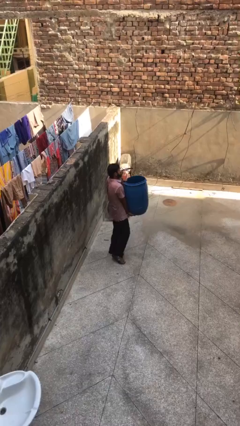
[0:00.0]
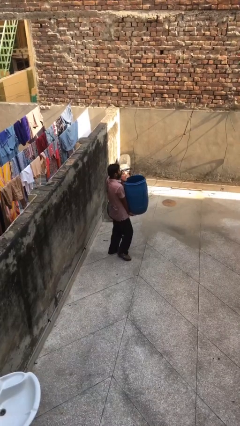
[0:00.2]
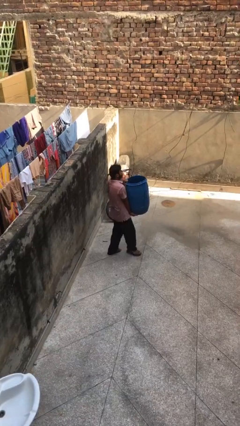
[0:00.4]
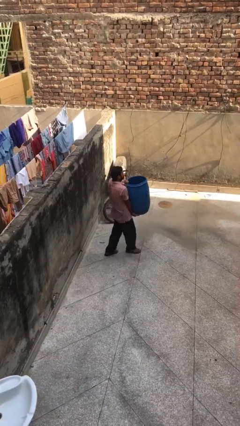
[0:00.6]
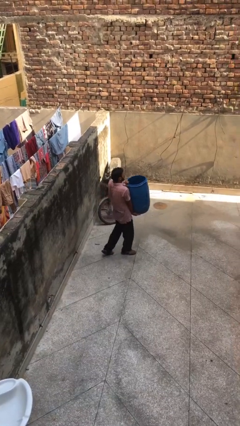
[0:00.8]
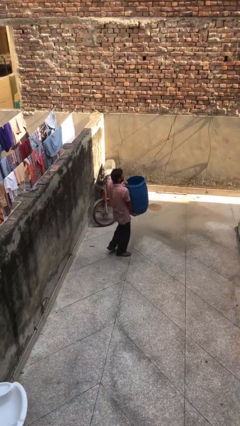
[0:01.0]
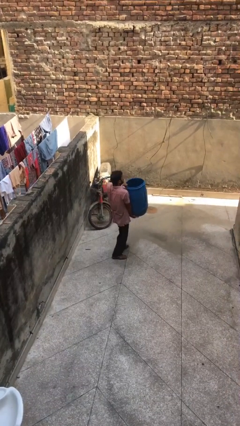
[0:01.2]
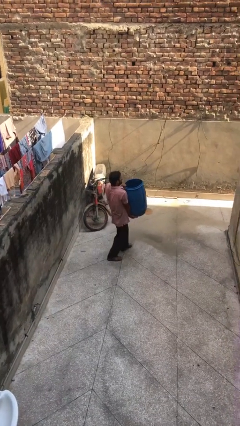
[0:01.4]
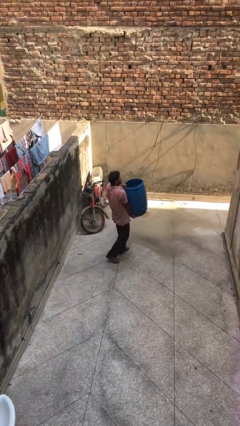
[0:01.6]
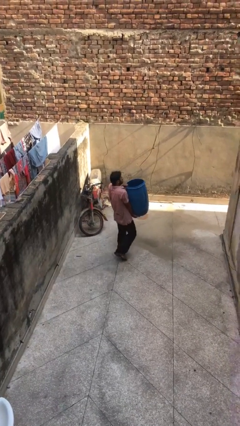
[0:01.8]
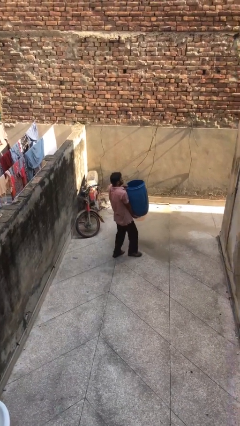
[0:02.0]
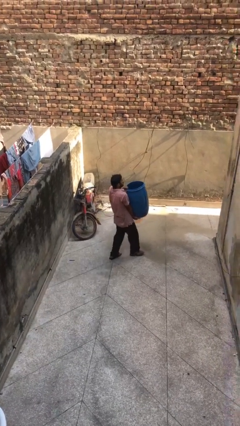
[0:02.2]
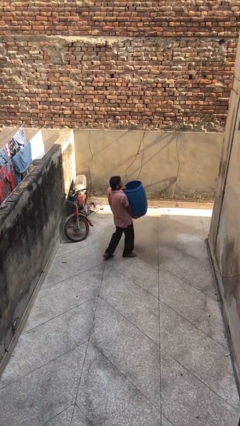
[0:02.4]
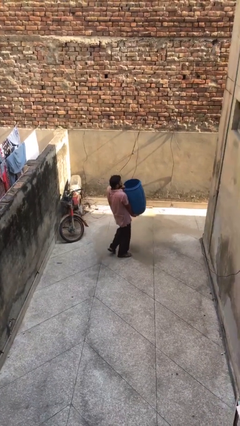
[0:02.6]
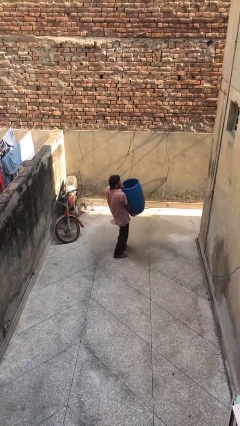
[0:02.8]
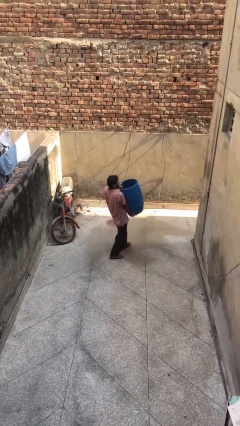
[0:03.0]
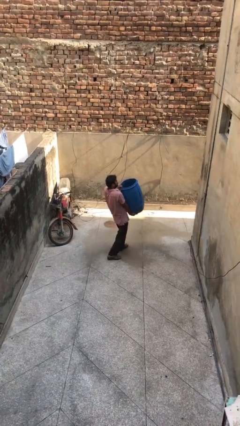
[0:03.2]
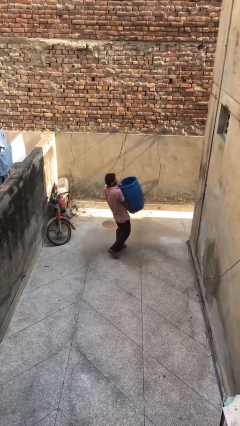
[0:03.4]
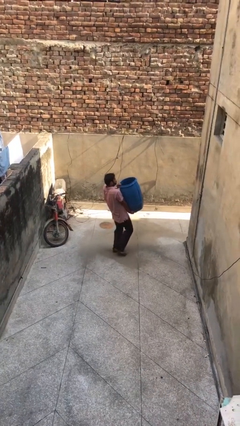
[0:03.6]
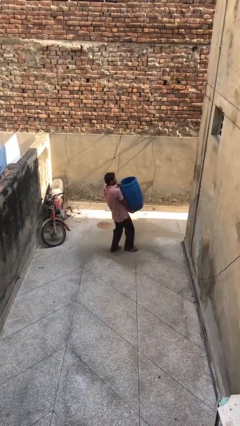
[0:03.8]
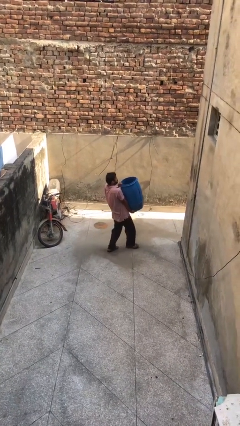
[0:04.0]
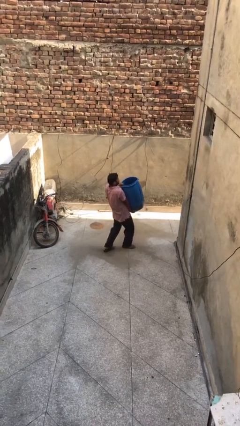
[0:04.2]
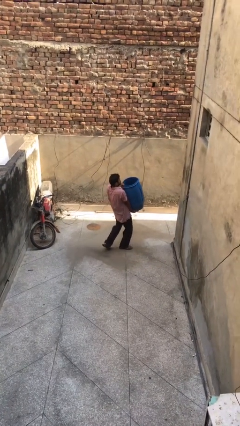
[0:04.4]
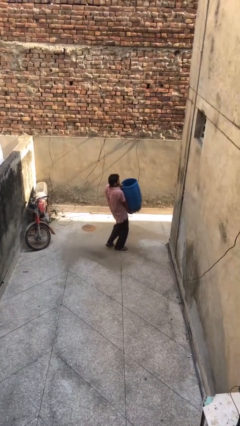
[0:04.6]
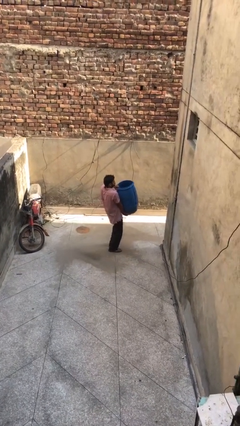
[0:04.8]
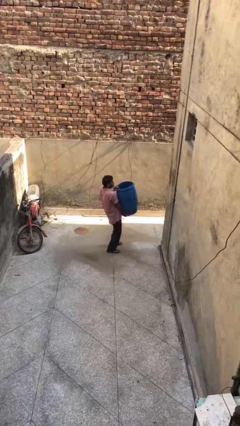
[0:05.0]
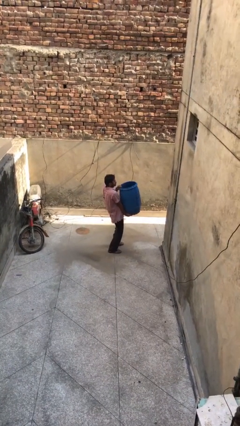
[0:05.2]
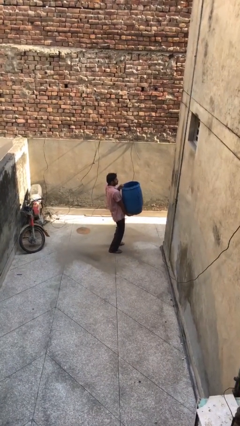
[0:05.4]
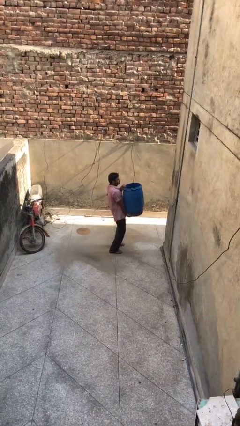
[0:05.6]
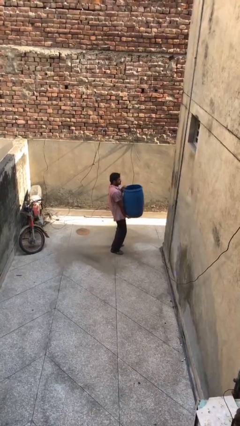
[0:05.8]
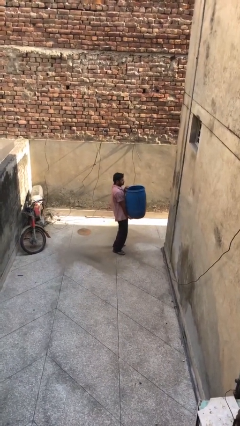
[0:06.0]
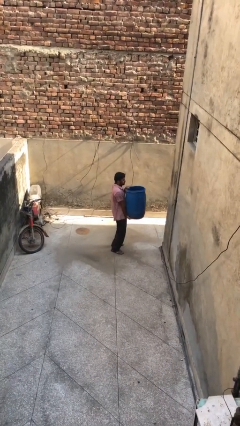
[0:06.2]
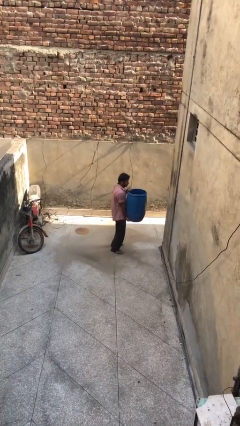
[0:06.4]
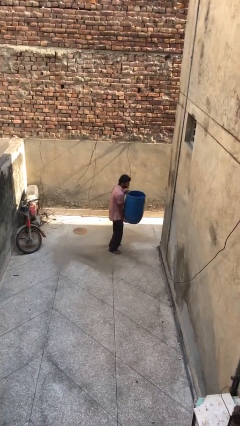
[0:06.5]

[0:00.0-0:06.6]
person carries heavy object

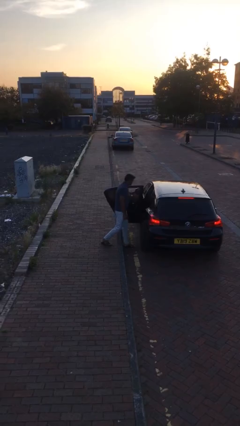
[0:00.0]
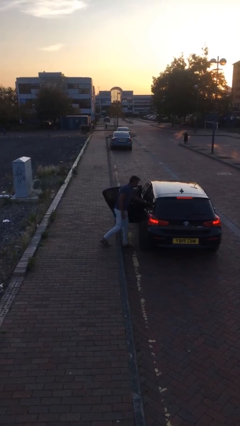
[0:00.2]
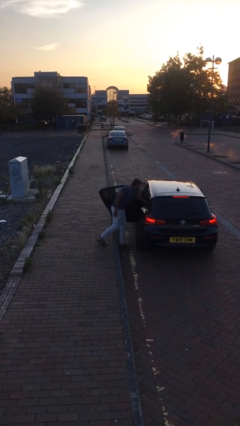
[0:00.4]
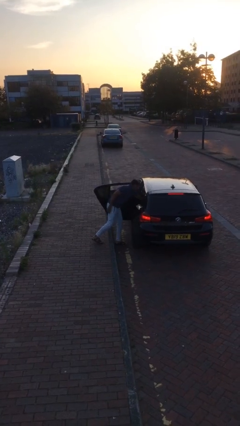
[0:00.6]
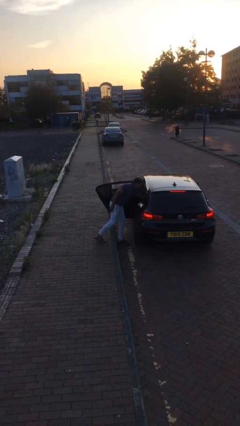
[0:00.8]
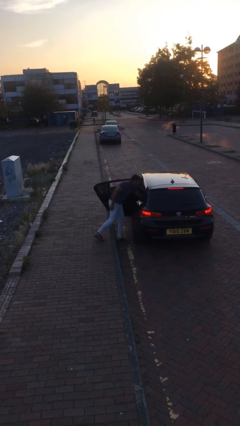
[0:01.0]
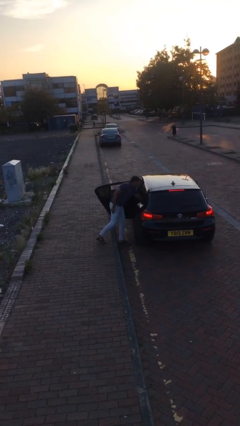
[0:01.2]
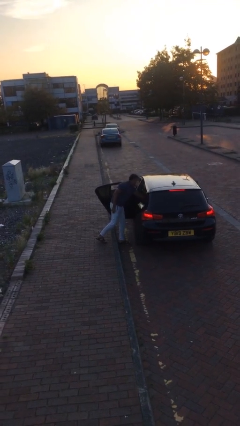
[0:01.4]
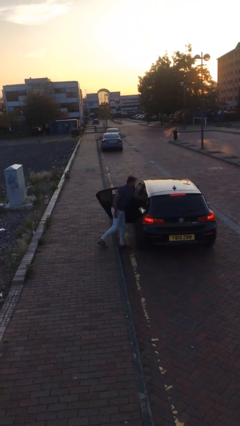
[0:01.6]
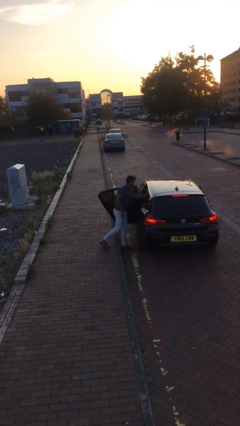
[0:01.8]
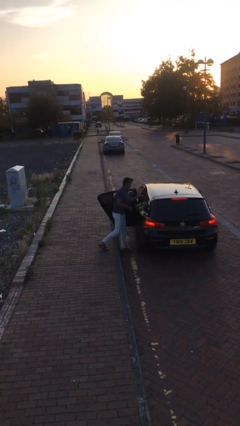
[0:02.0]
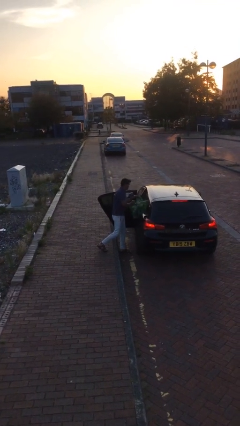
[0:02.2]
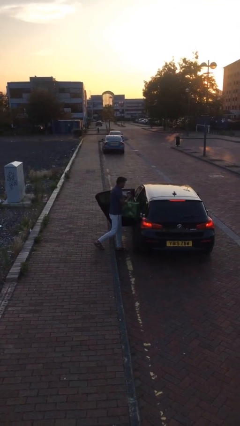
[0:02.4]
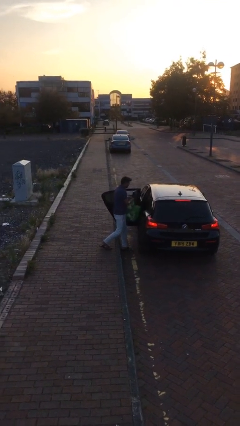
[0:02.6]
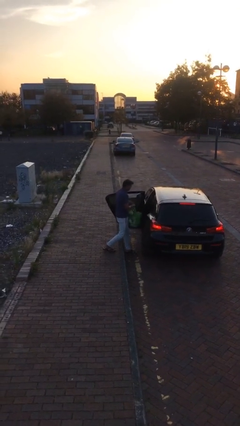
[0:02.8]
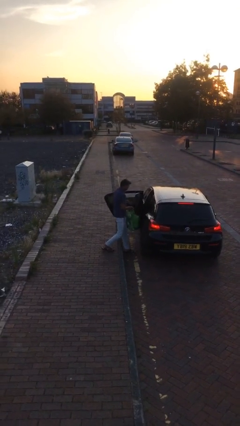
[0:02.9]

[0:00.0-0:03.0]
person unloads car

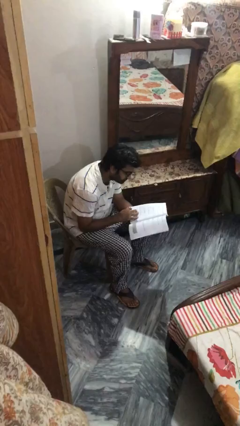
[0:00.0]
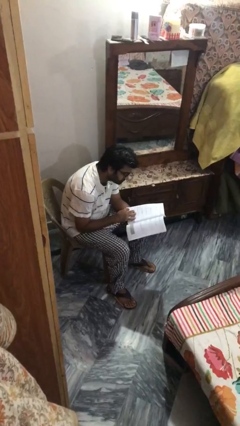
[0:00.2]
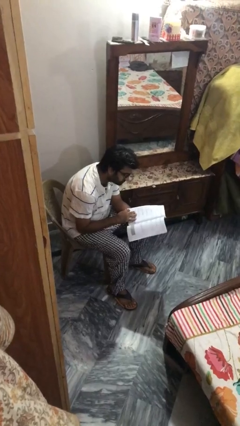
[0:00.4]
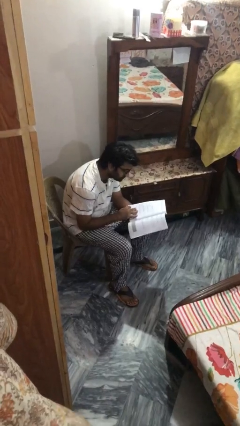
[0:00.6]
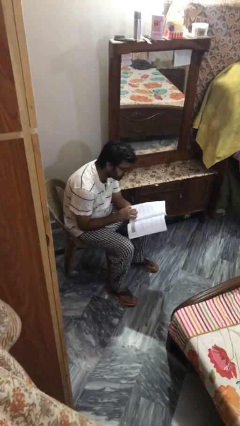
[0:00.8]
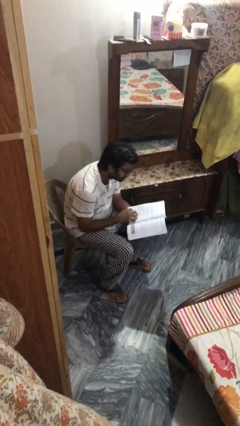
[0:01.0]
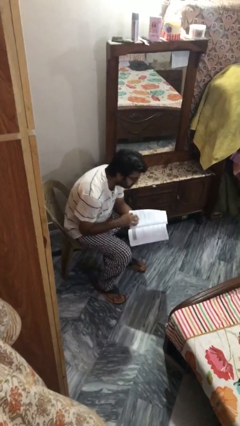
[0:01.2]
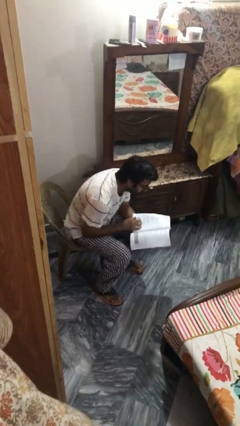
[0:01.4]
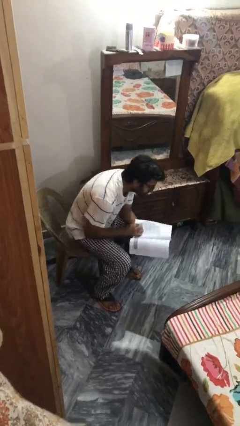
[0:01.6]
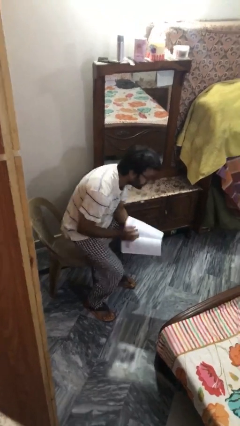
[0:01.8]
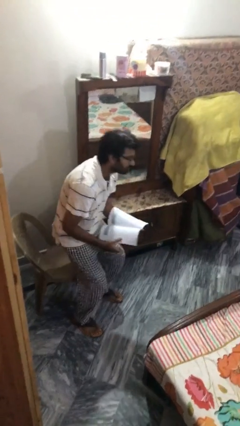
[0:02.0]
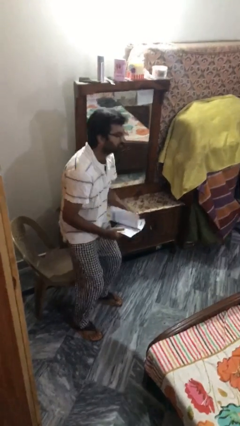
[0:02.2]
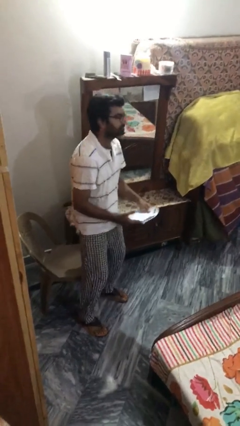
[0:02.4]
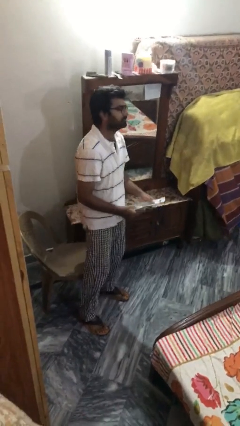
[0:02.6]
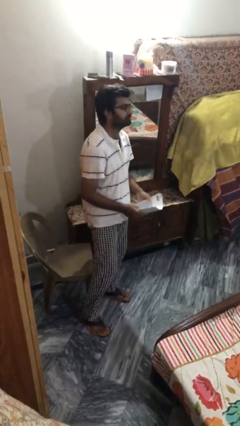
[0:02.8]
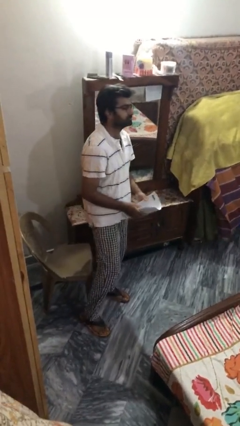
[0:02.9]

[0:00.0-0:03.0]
person stands up

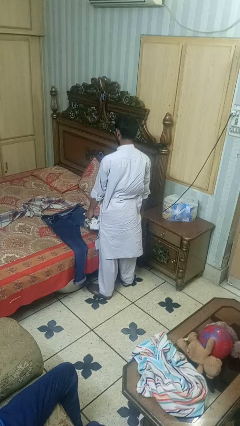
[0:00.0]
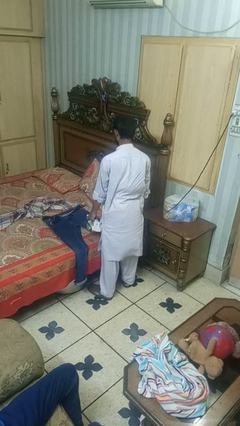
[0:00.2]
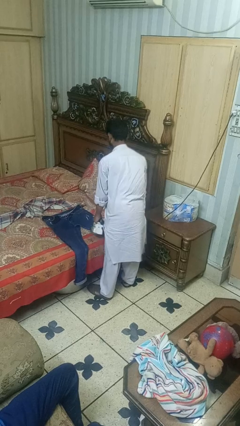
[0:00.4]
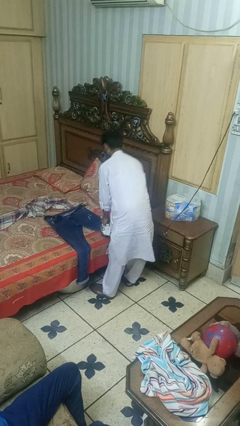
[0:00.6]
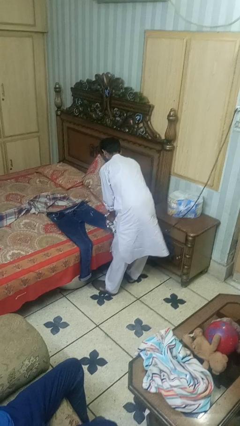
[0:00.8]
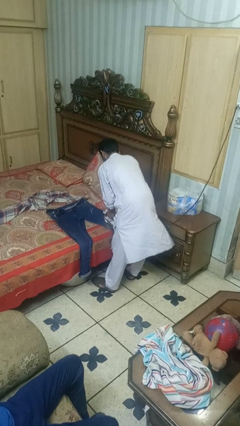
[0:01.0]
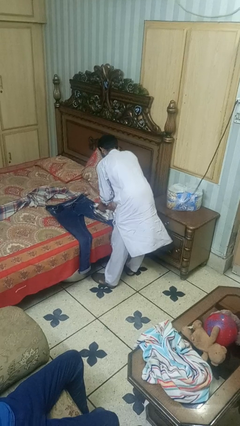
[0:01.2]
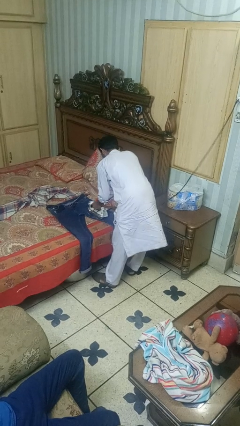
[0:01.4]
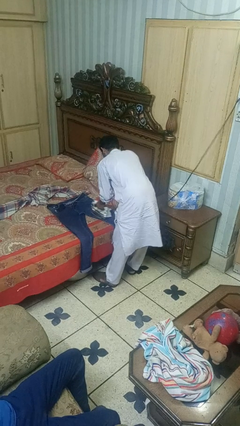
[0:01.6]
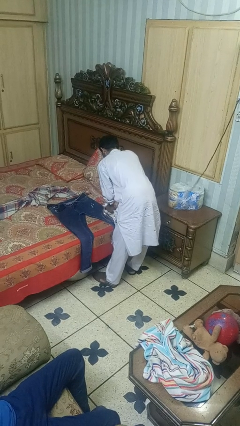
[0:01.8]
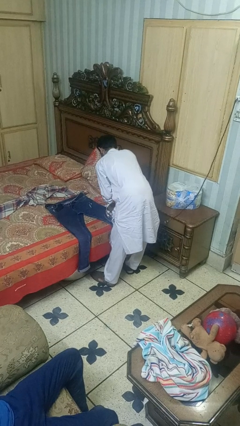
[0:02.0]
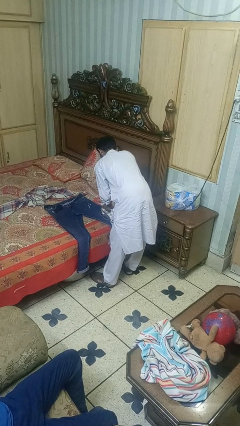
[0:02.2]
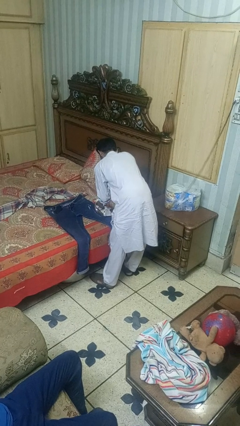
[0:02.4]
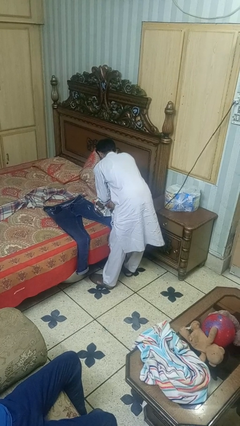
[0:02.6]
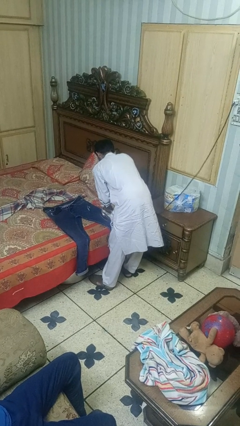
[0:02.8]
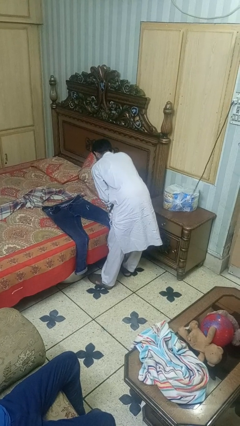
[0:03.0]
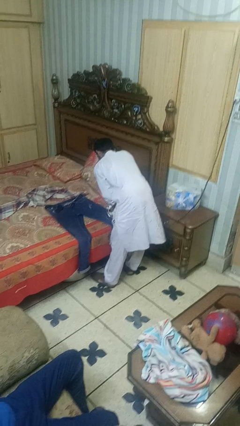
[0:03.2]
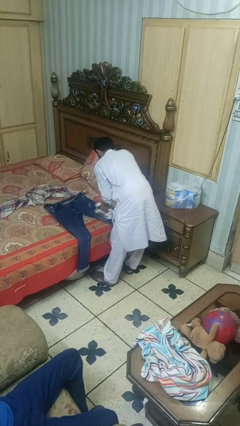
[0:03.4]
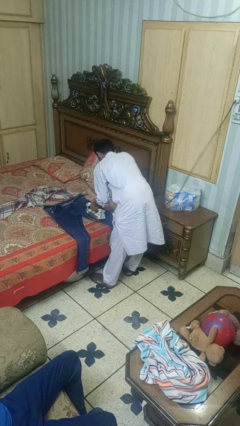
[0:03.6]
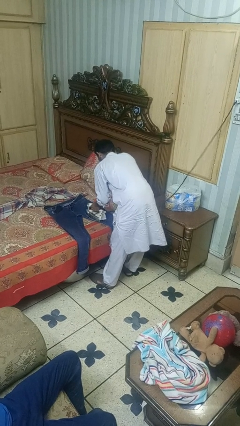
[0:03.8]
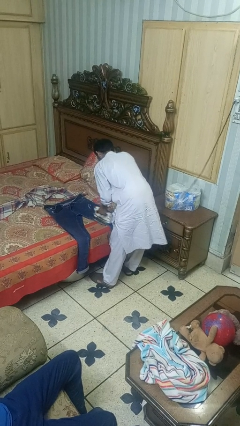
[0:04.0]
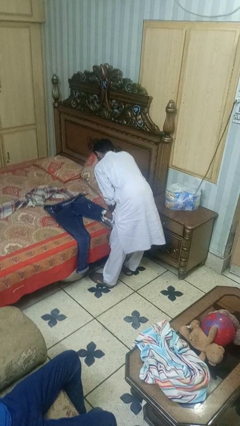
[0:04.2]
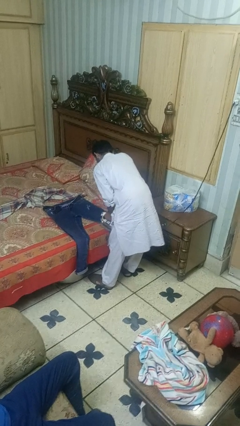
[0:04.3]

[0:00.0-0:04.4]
person irons clothes
